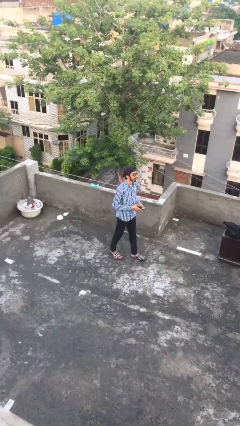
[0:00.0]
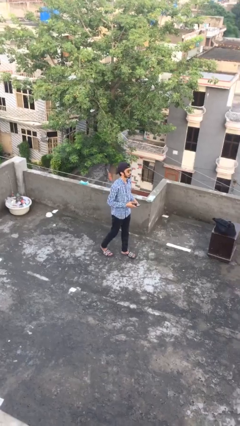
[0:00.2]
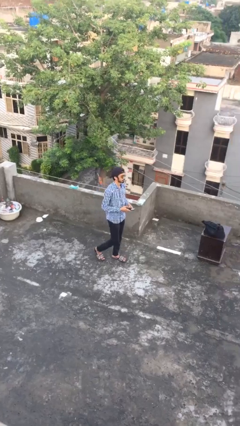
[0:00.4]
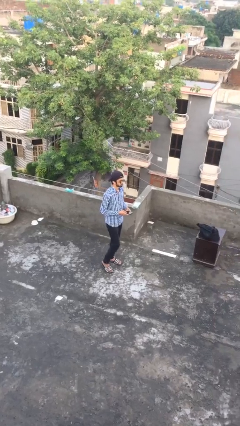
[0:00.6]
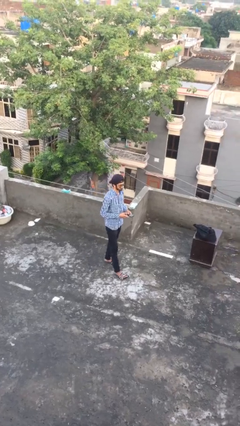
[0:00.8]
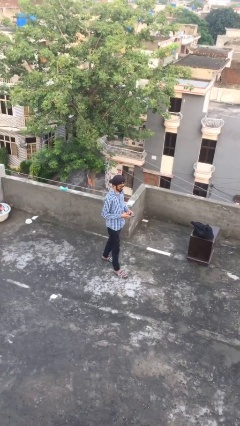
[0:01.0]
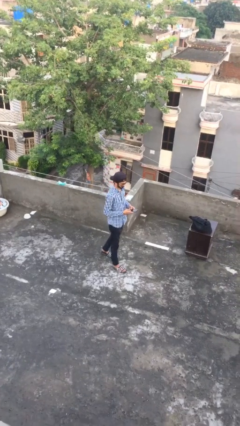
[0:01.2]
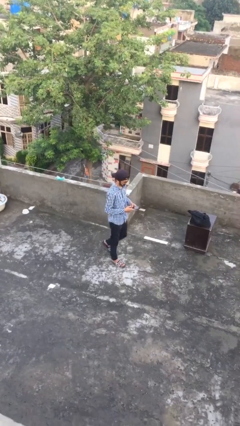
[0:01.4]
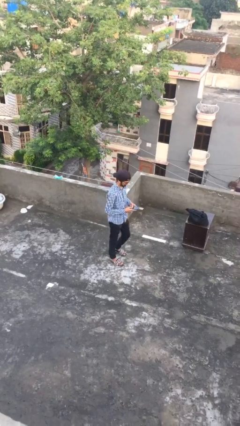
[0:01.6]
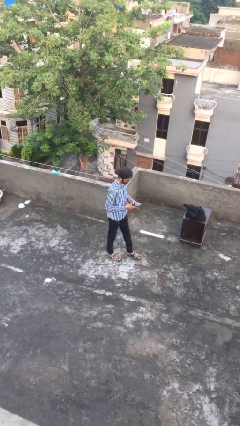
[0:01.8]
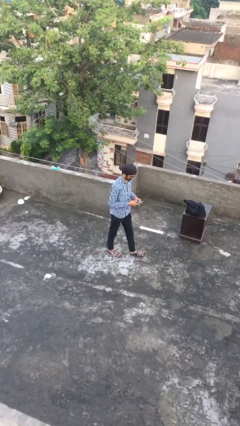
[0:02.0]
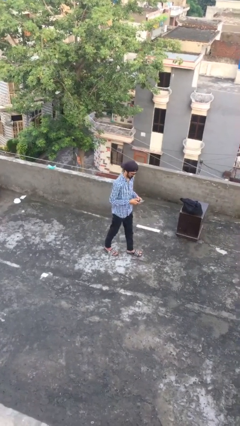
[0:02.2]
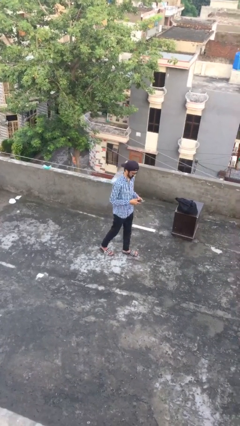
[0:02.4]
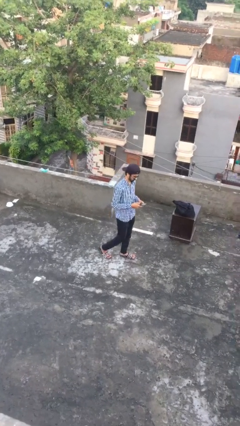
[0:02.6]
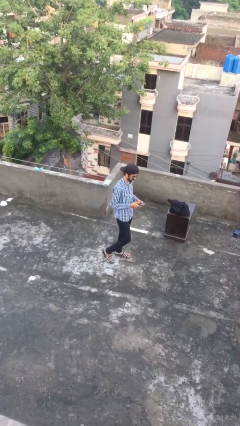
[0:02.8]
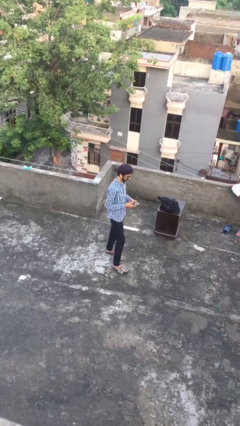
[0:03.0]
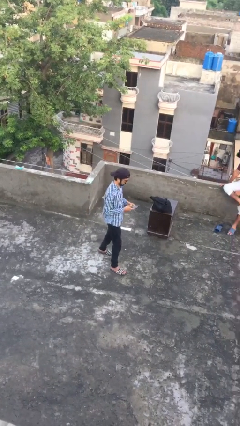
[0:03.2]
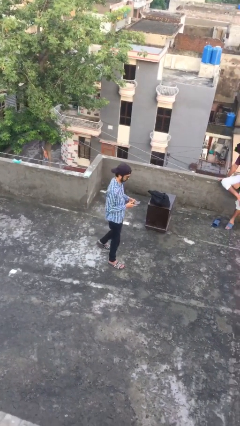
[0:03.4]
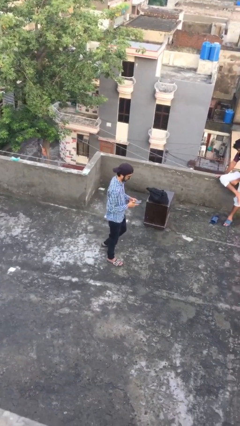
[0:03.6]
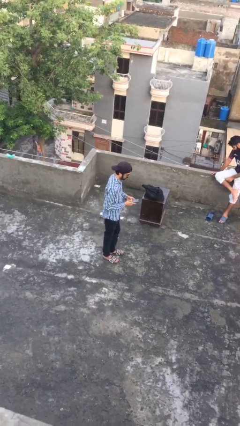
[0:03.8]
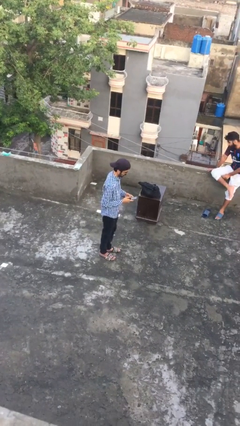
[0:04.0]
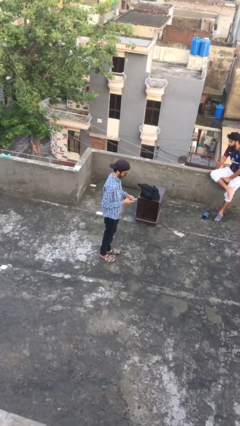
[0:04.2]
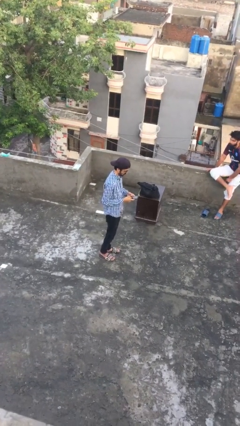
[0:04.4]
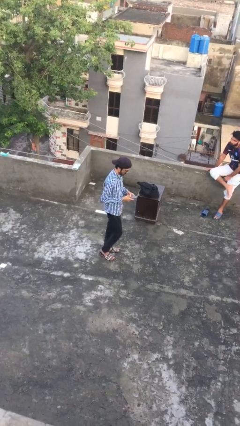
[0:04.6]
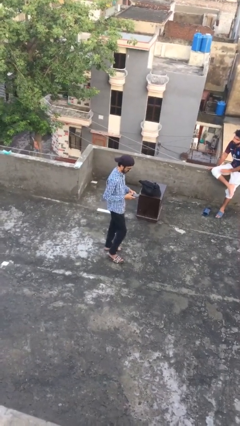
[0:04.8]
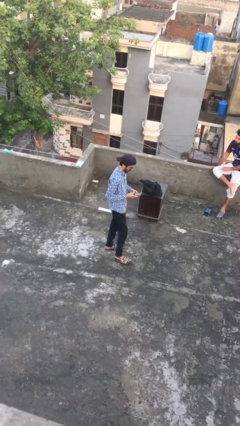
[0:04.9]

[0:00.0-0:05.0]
person texts on phone

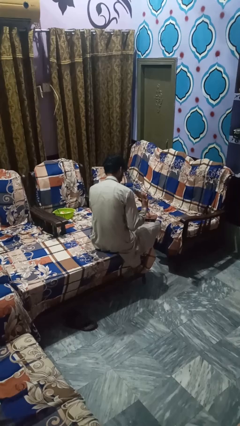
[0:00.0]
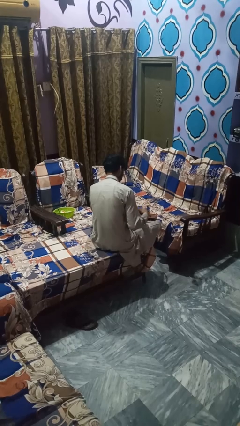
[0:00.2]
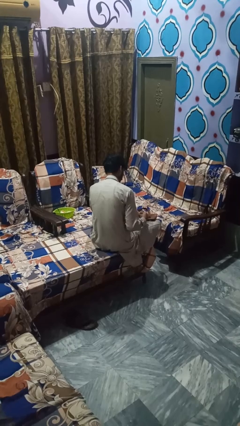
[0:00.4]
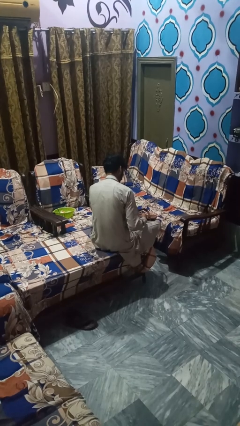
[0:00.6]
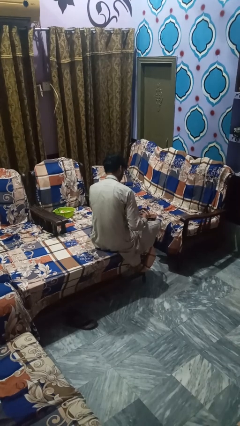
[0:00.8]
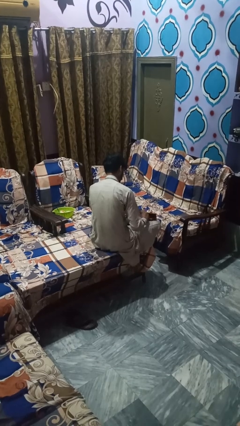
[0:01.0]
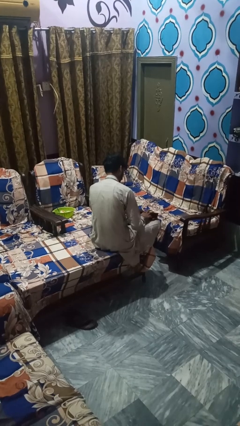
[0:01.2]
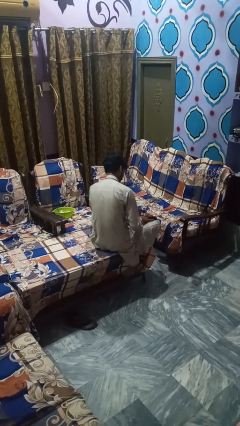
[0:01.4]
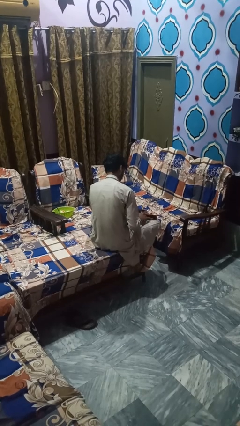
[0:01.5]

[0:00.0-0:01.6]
person puts object into bag

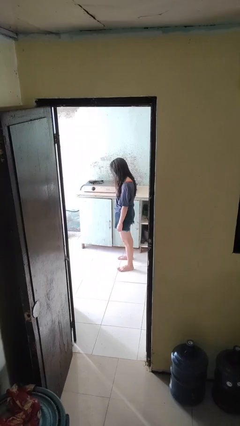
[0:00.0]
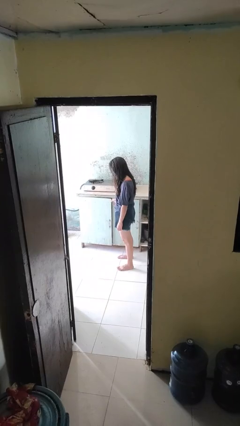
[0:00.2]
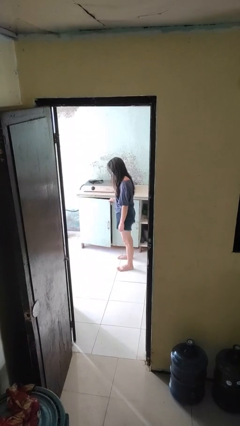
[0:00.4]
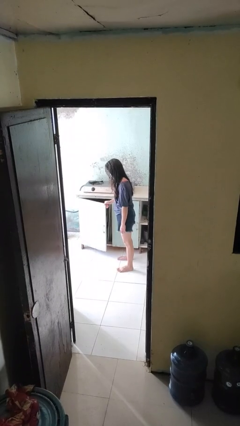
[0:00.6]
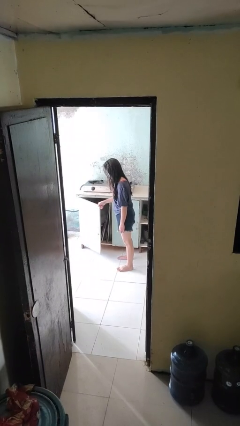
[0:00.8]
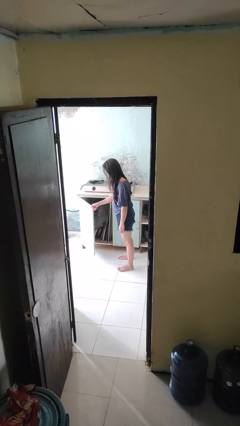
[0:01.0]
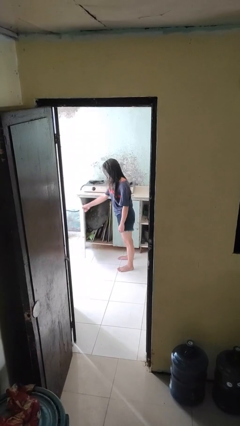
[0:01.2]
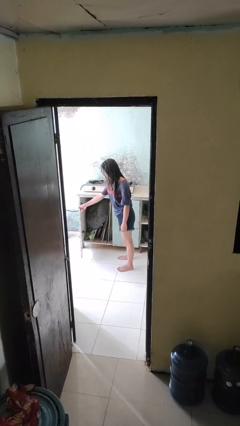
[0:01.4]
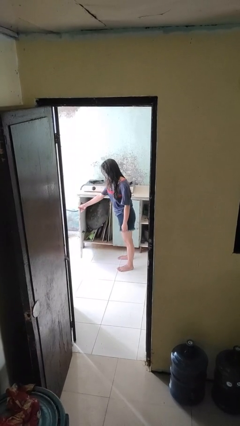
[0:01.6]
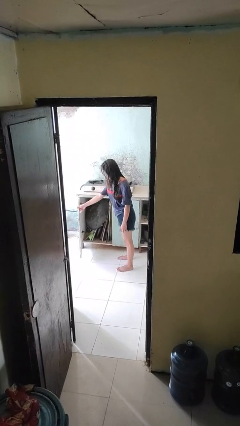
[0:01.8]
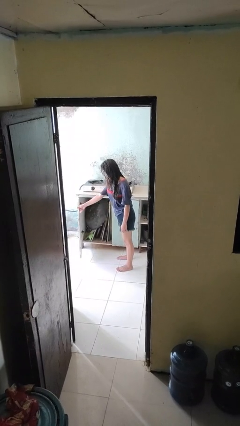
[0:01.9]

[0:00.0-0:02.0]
person opens cabinet

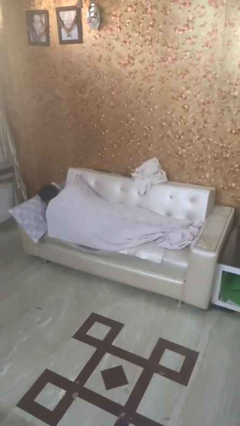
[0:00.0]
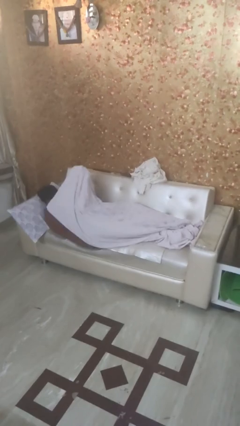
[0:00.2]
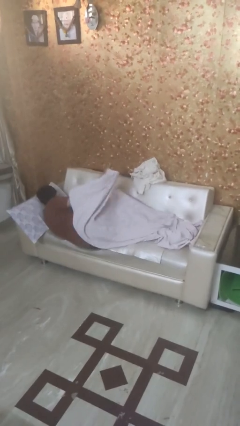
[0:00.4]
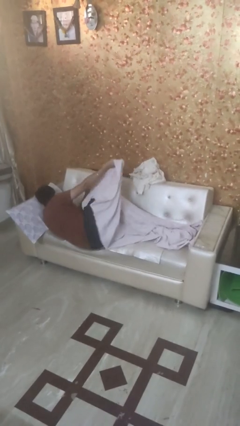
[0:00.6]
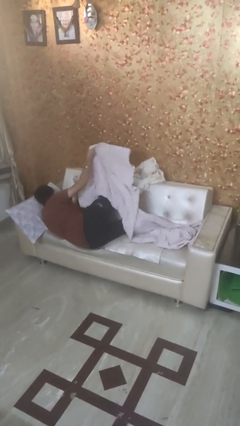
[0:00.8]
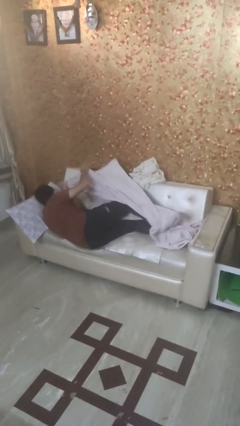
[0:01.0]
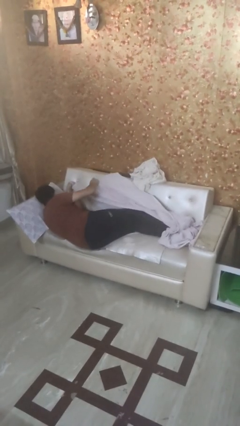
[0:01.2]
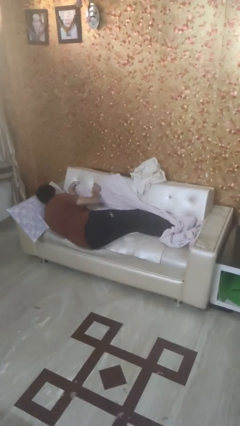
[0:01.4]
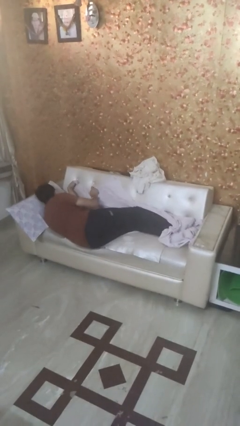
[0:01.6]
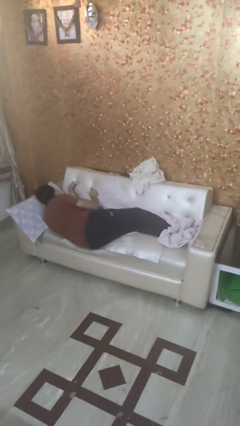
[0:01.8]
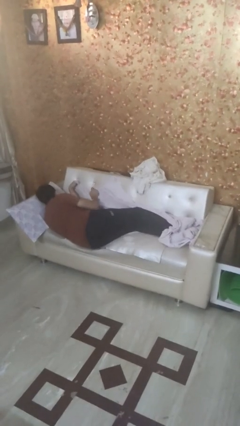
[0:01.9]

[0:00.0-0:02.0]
person uncovers with bedsheets

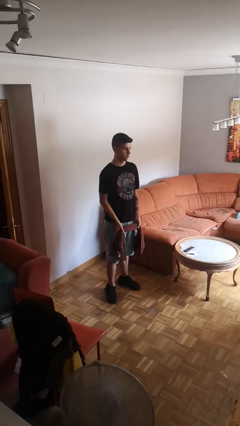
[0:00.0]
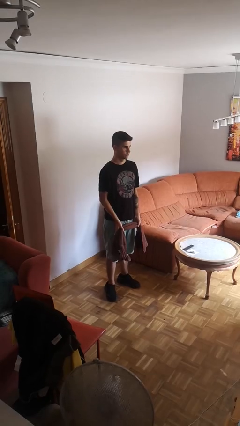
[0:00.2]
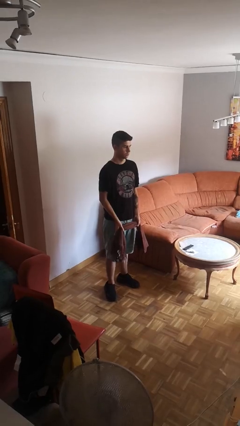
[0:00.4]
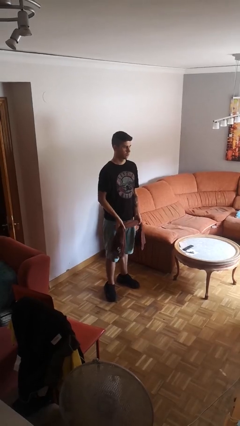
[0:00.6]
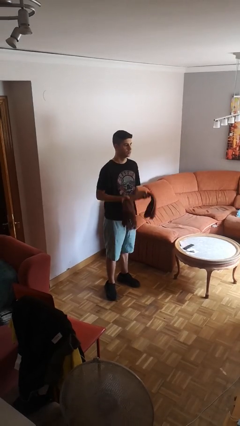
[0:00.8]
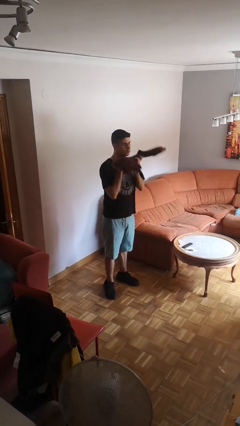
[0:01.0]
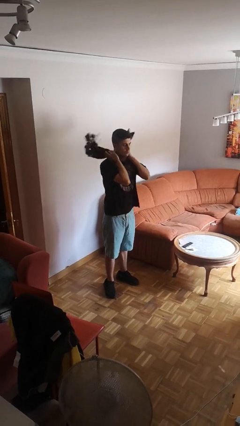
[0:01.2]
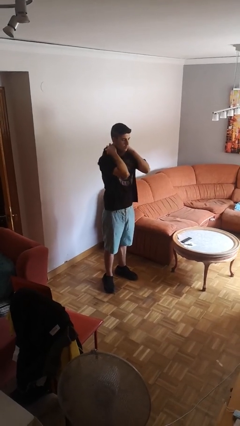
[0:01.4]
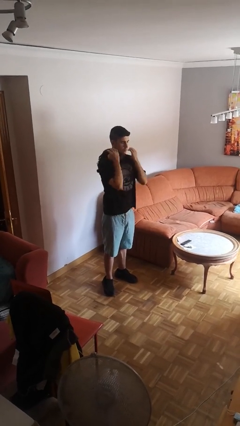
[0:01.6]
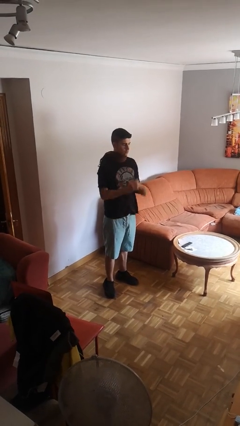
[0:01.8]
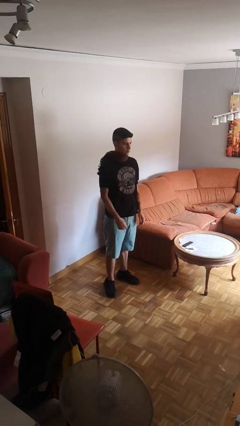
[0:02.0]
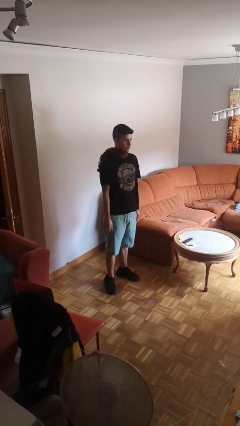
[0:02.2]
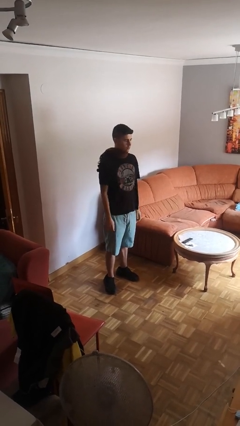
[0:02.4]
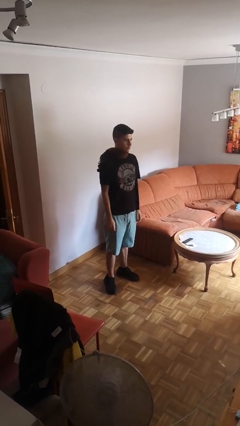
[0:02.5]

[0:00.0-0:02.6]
person puts on scarf

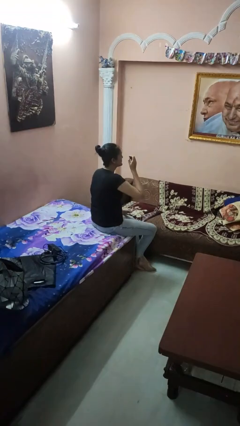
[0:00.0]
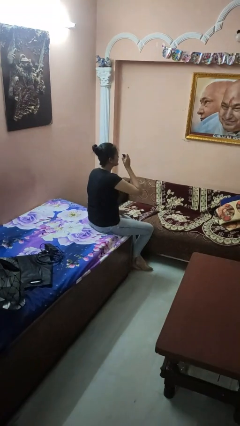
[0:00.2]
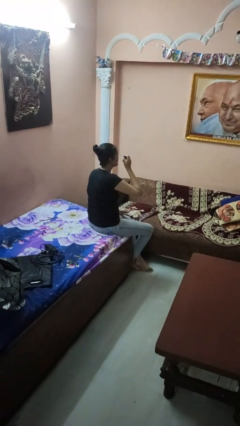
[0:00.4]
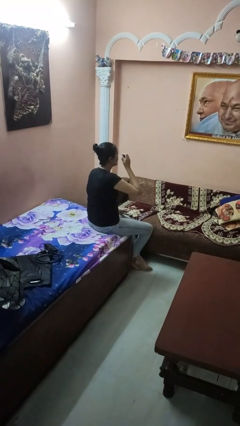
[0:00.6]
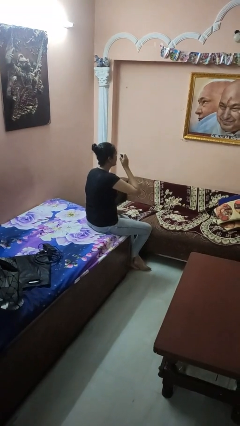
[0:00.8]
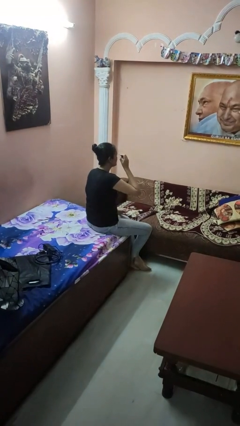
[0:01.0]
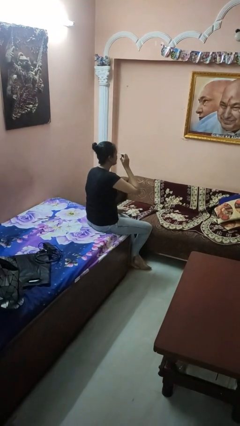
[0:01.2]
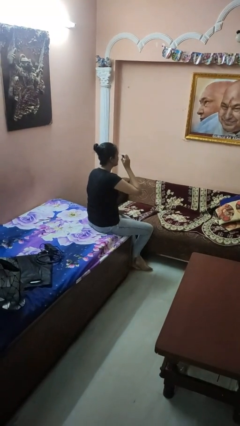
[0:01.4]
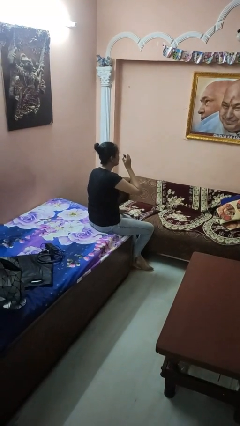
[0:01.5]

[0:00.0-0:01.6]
person applies eye makeup

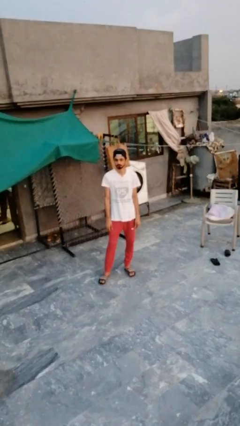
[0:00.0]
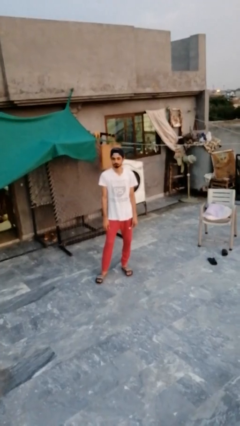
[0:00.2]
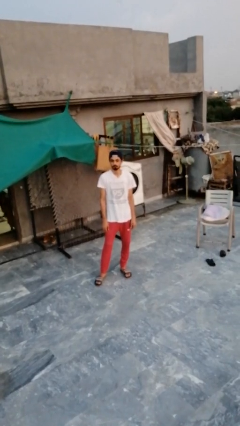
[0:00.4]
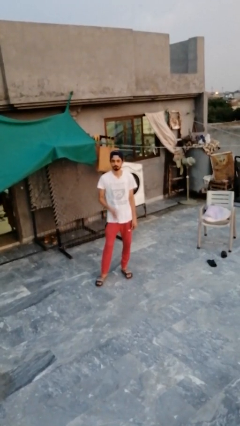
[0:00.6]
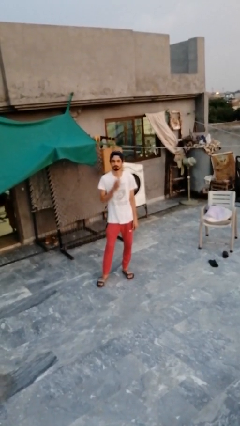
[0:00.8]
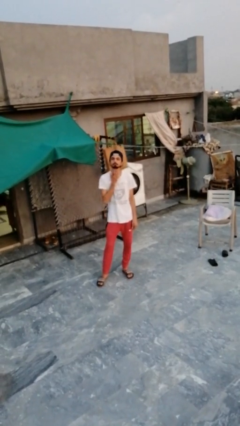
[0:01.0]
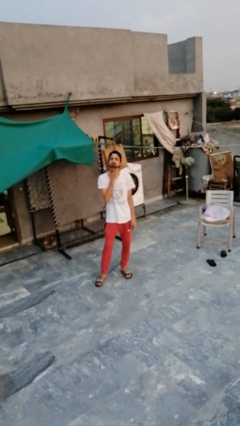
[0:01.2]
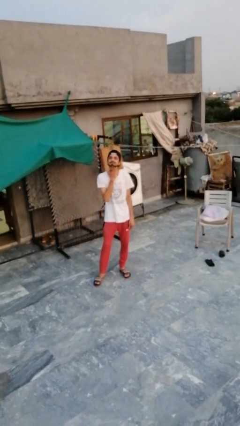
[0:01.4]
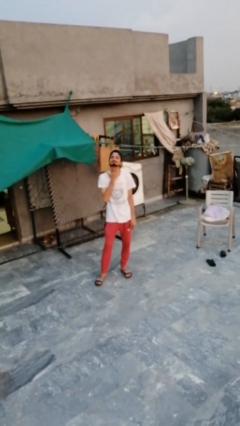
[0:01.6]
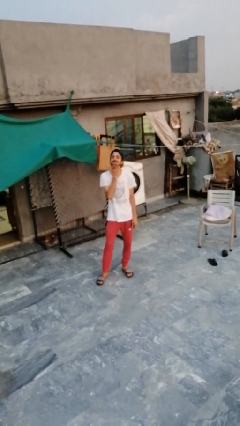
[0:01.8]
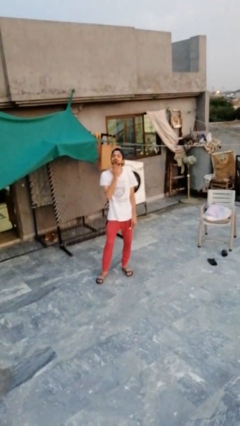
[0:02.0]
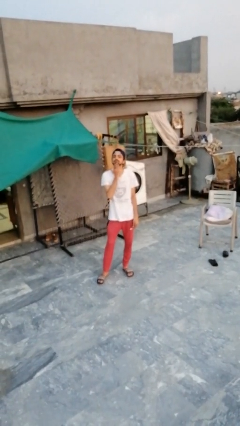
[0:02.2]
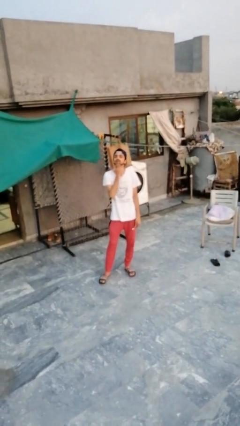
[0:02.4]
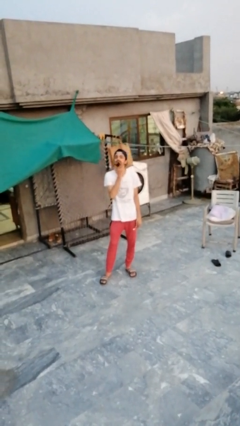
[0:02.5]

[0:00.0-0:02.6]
person strokes chin
